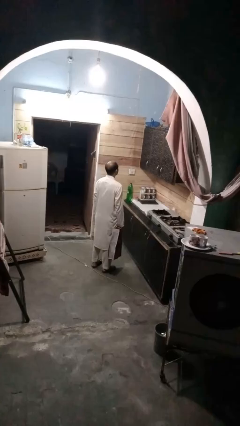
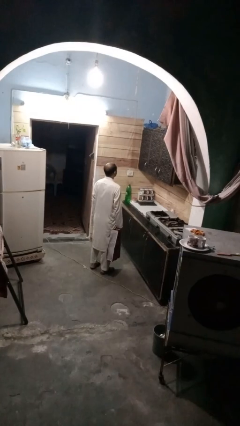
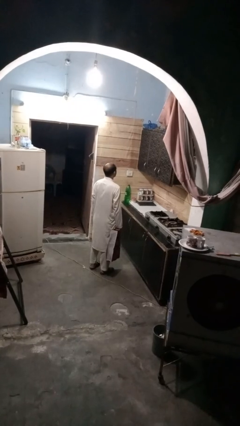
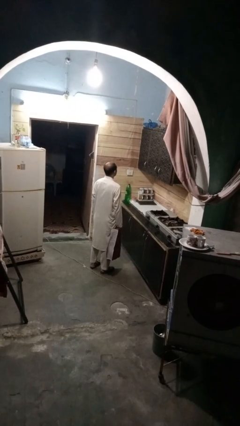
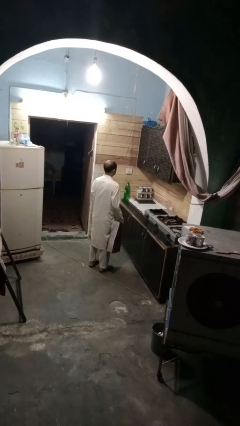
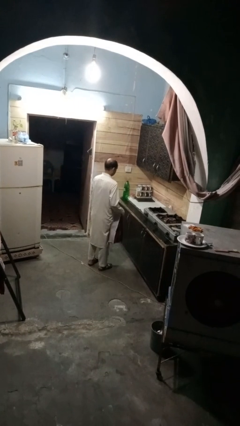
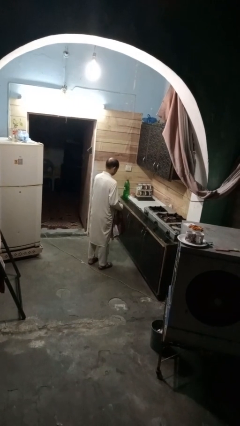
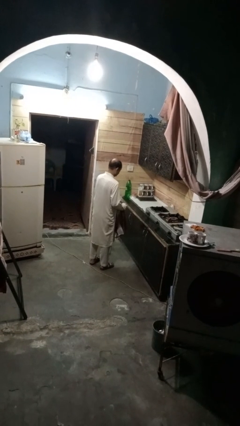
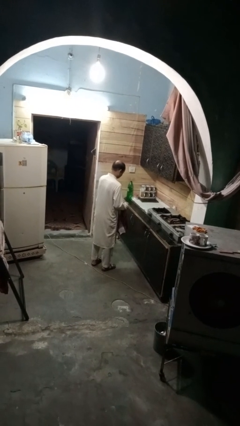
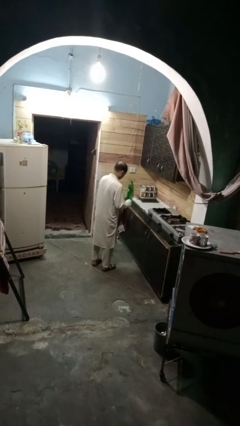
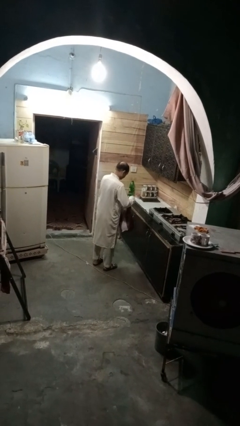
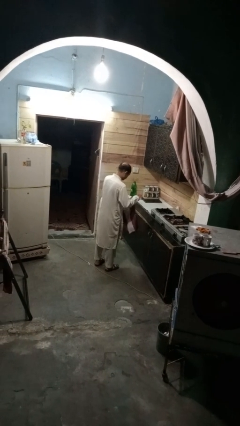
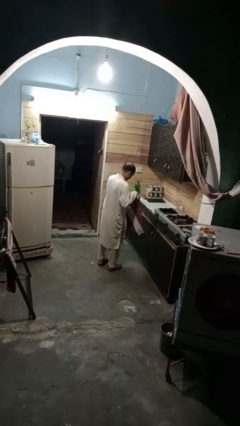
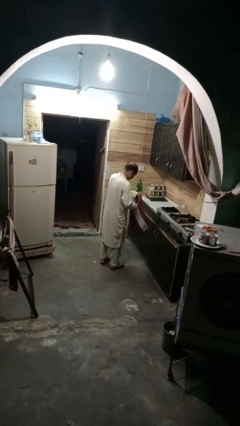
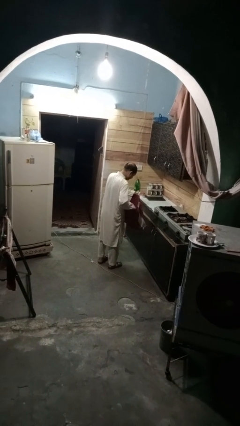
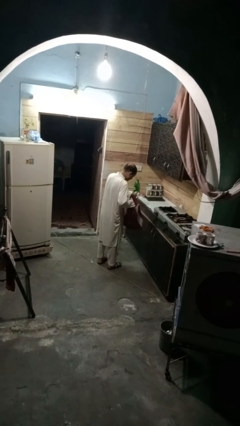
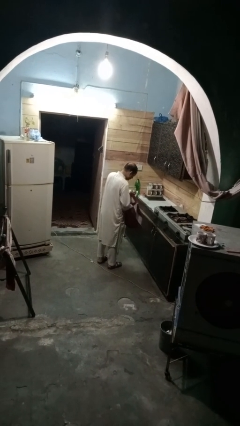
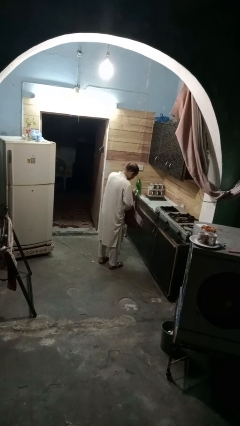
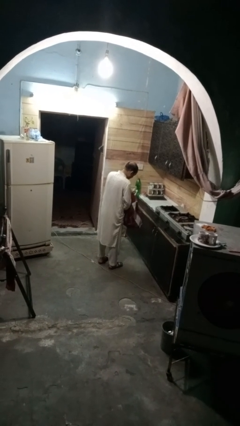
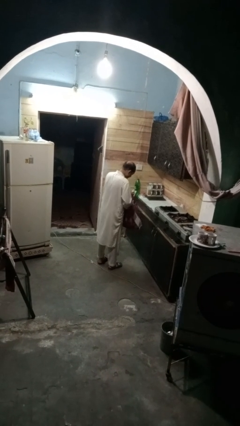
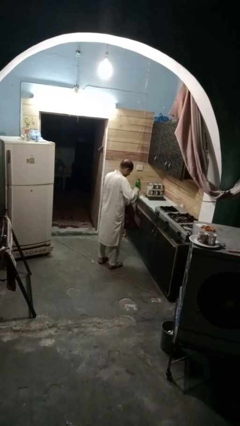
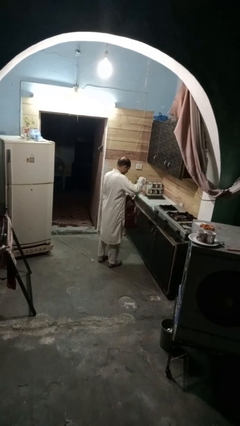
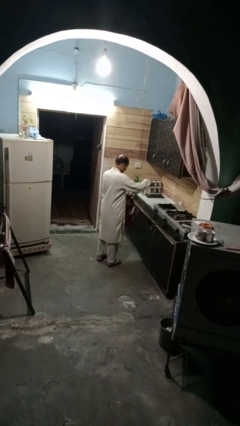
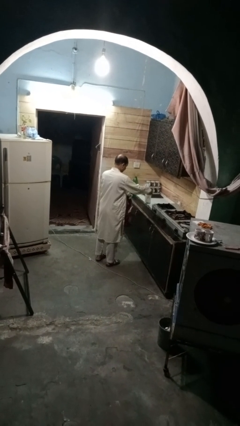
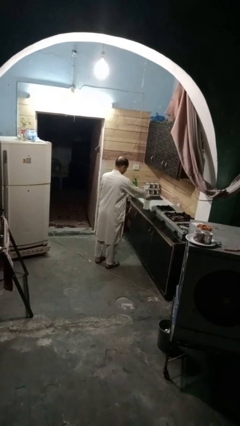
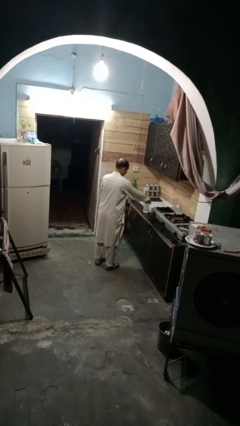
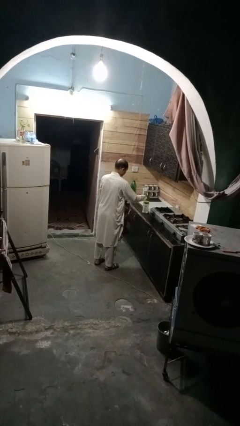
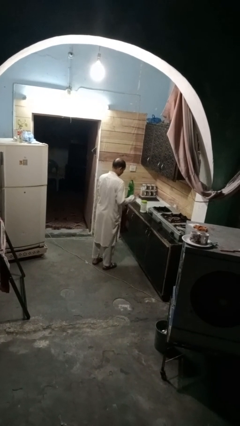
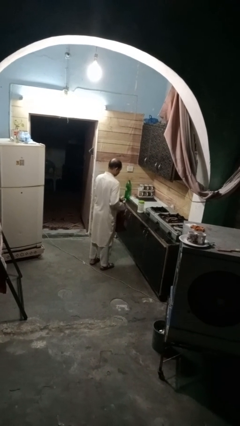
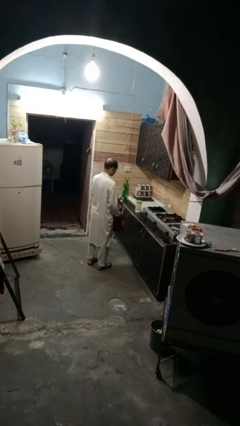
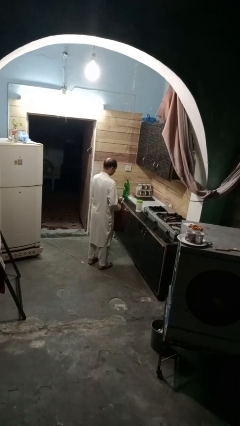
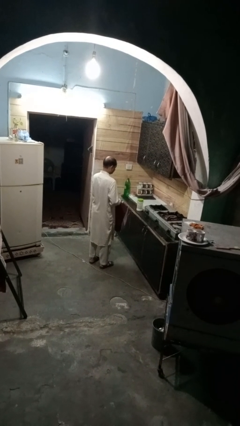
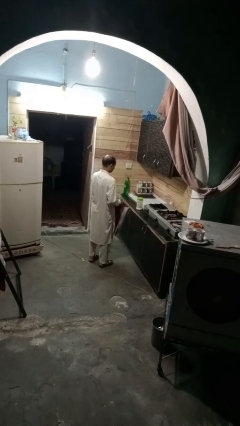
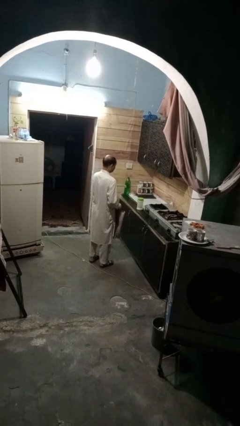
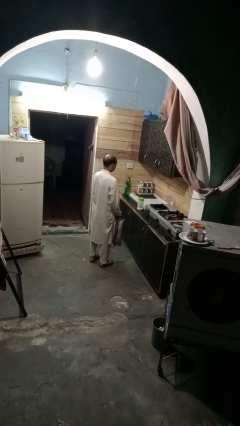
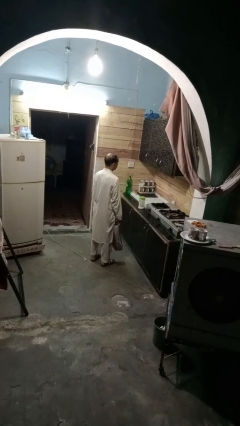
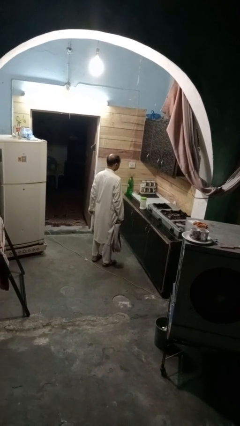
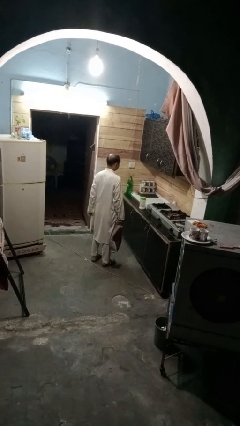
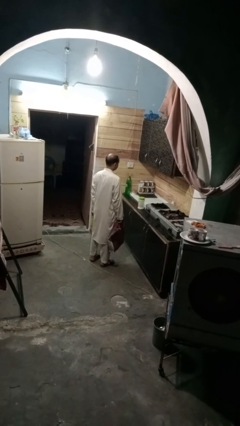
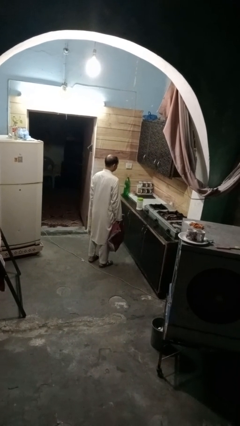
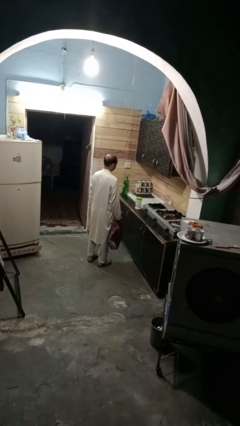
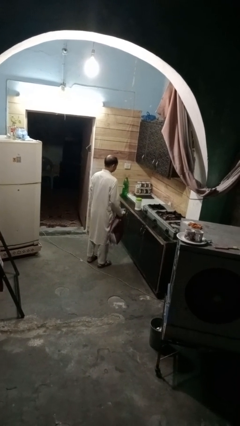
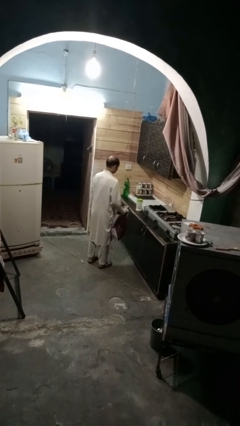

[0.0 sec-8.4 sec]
person takes object from bag

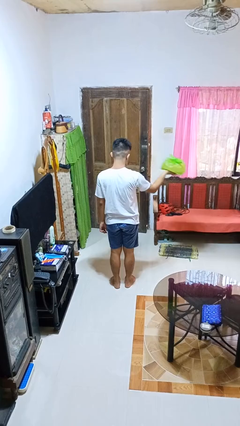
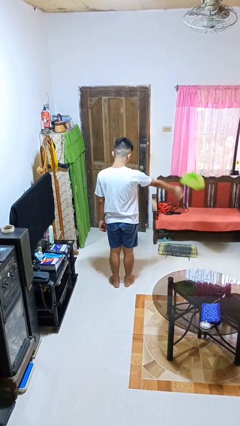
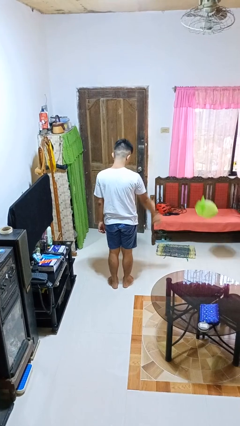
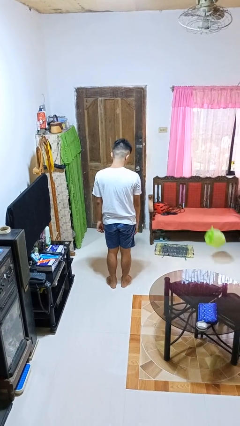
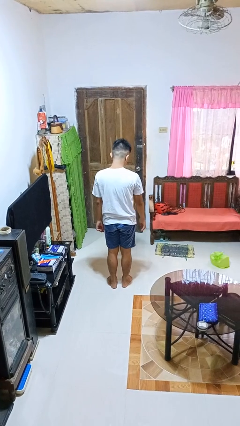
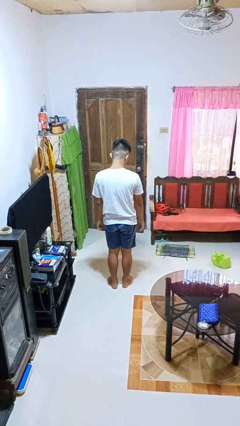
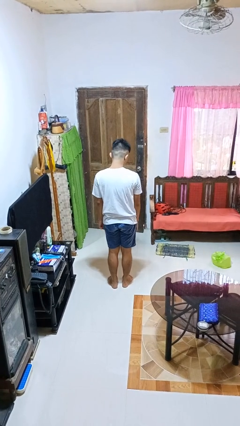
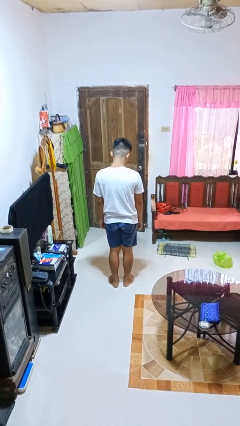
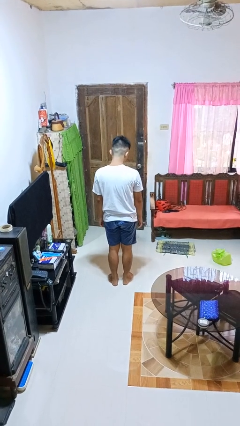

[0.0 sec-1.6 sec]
person throws object to ground

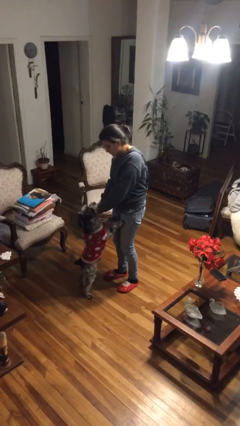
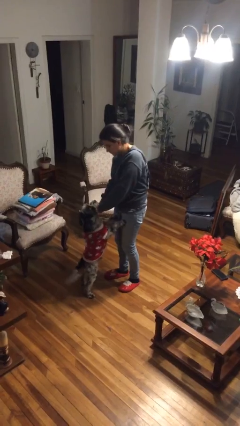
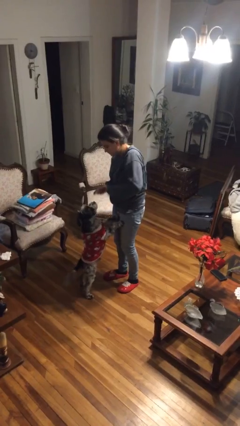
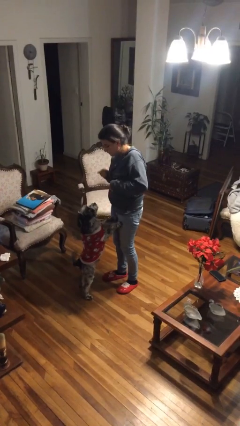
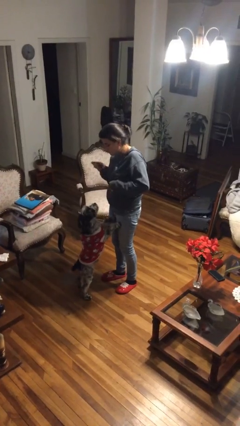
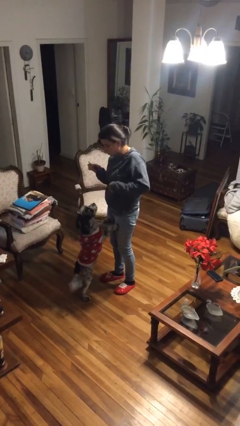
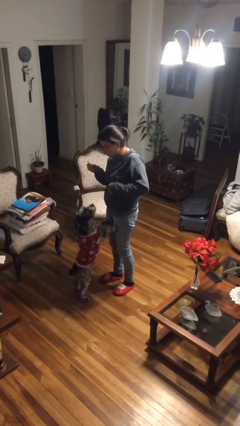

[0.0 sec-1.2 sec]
person unattaches leash from dog

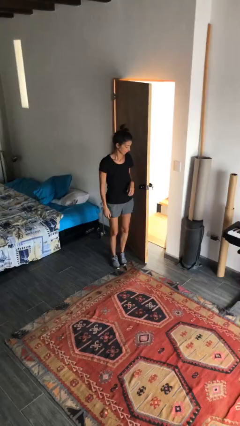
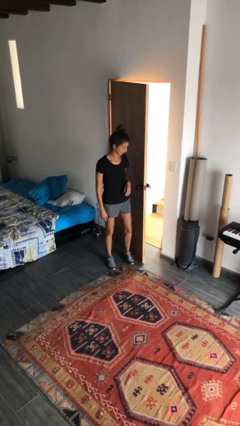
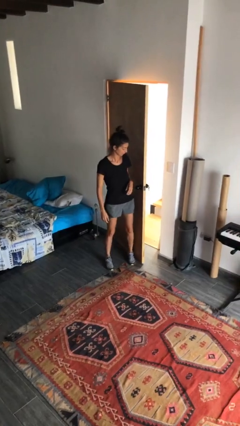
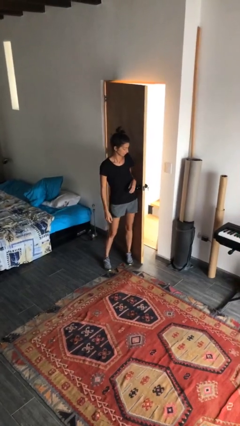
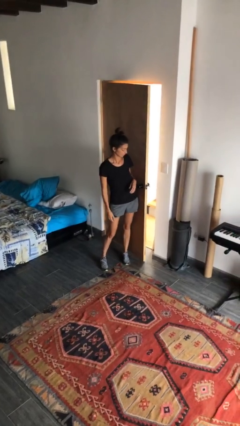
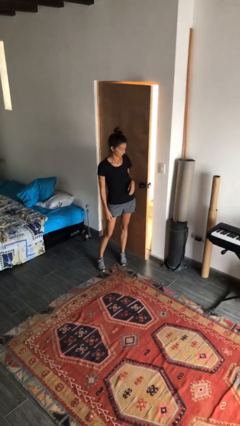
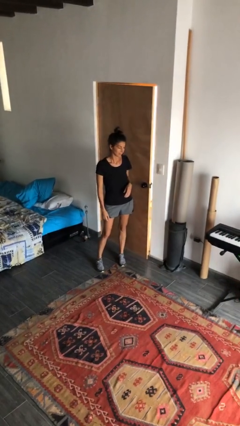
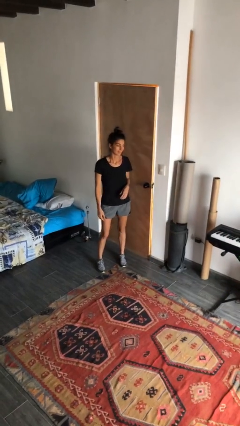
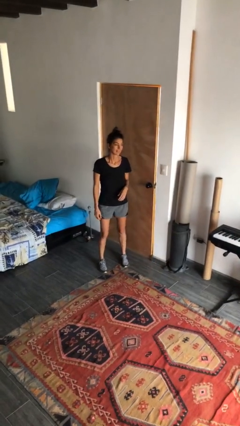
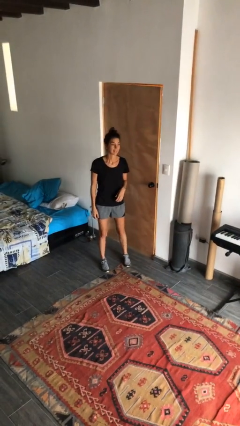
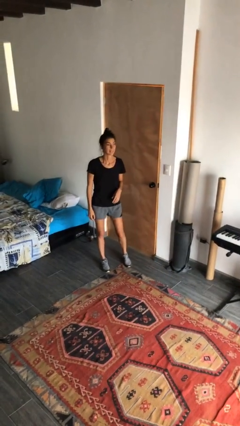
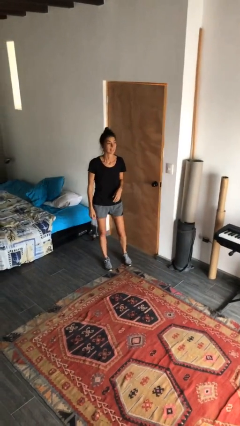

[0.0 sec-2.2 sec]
person closes door with hip

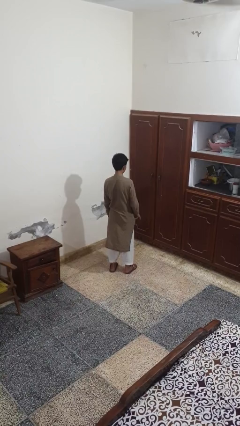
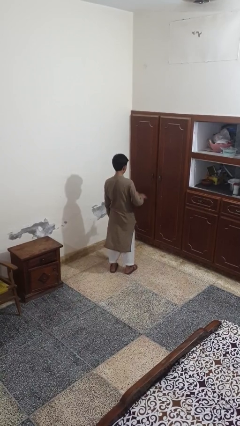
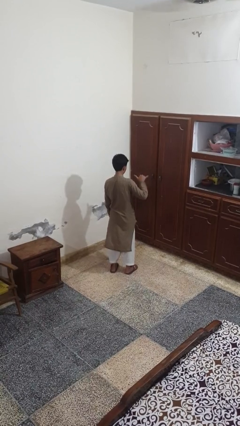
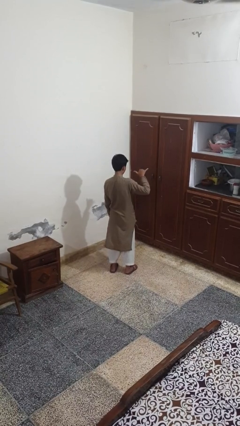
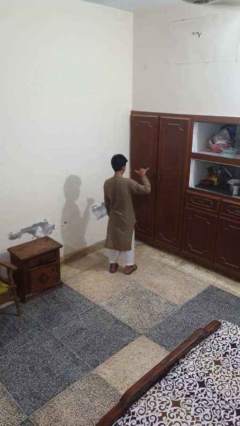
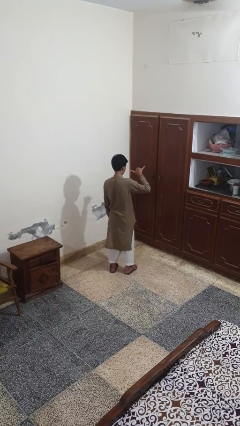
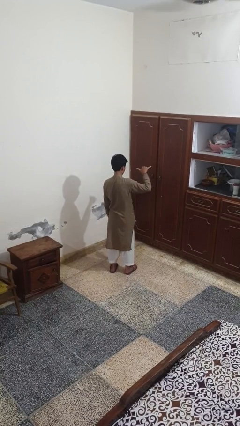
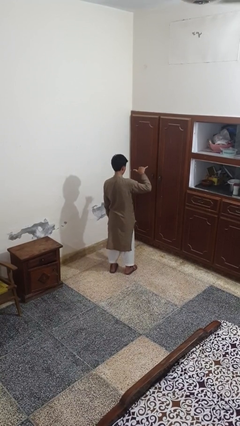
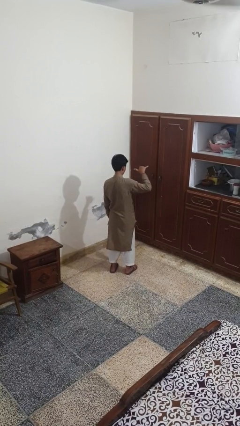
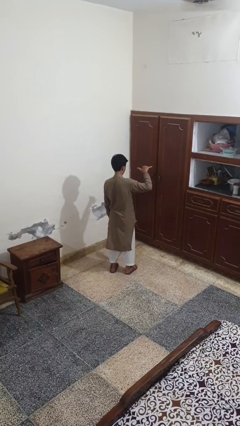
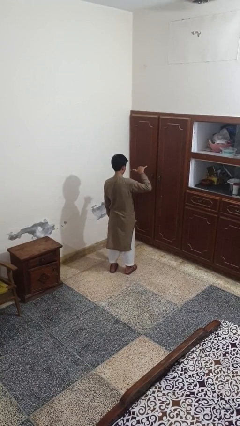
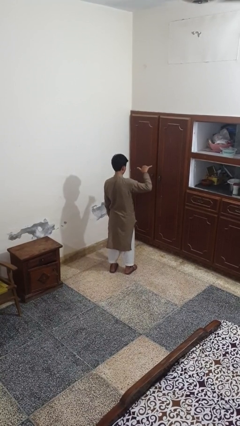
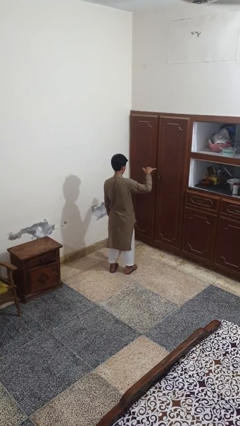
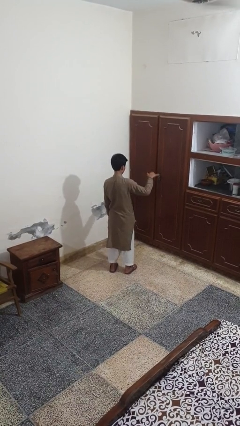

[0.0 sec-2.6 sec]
person gestures hang loose

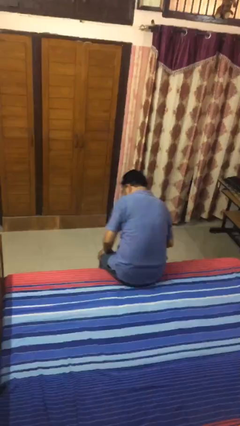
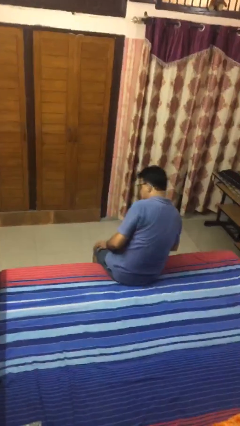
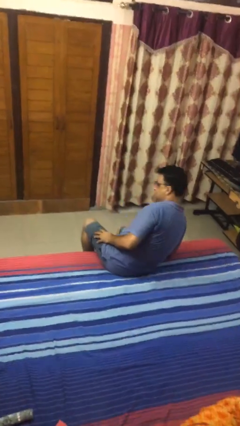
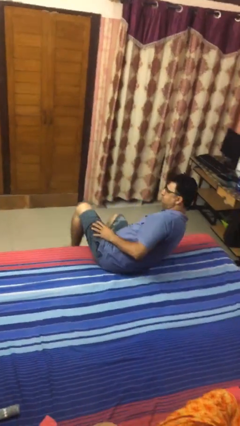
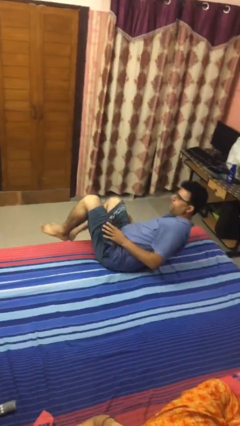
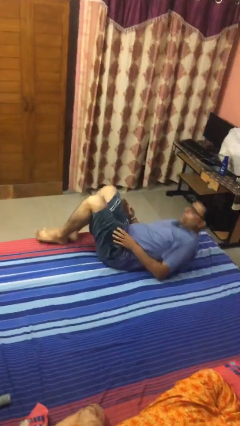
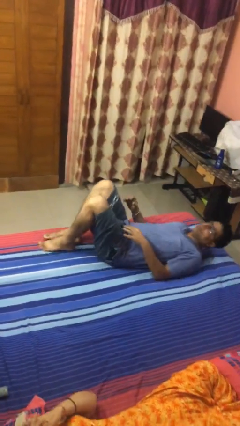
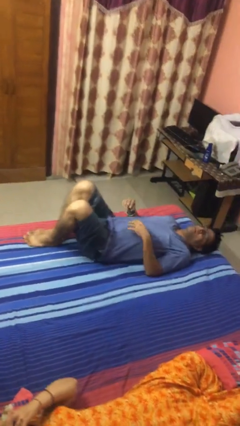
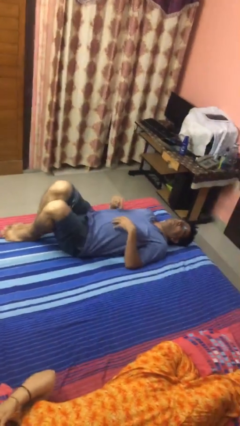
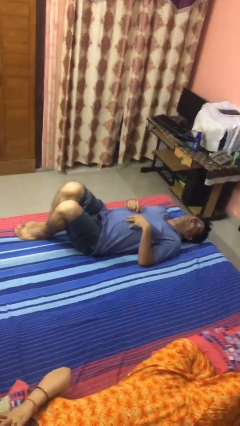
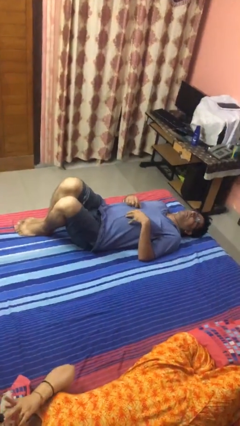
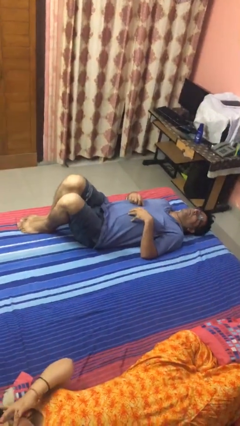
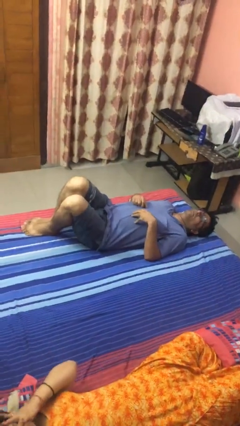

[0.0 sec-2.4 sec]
person lies down on bed
